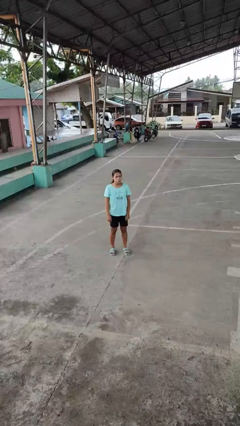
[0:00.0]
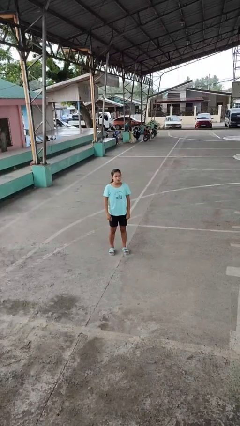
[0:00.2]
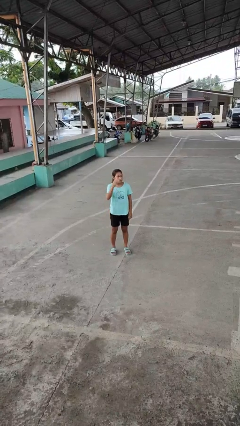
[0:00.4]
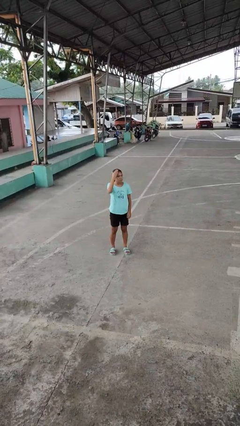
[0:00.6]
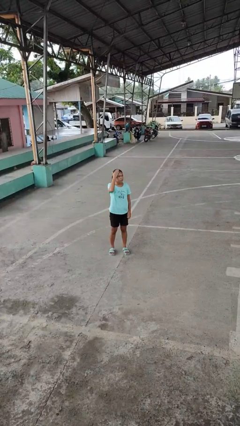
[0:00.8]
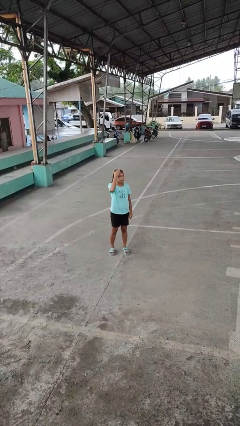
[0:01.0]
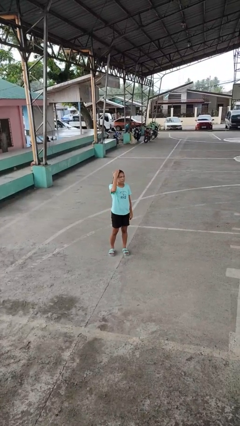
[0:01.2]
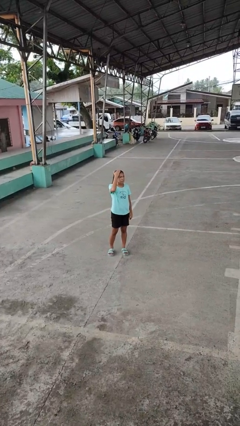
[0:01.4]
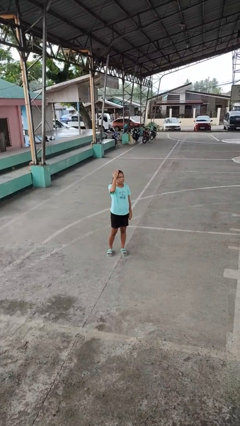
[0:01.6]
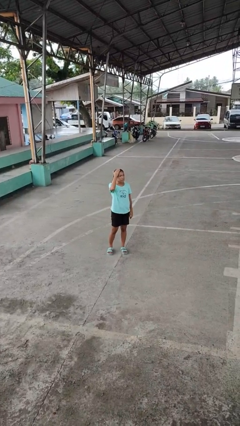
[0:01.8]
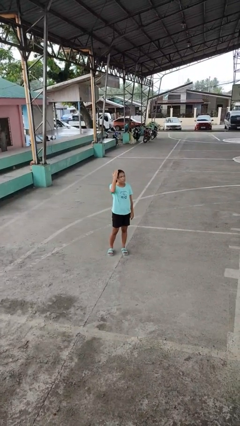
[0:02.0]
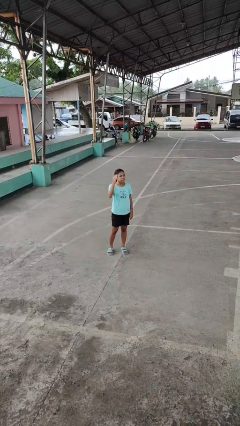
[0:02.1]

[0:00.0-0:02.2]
person pats head

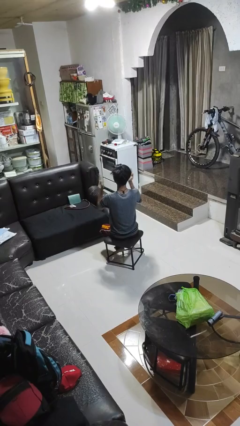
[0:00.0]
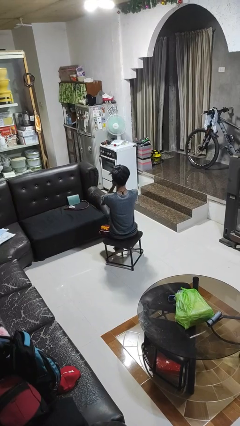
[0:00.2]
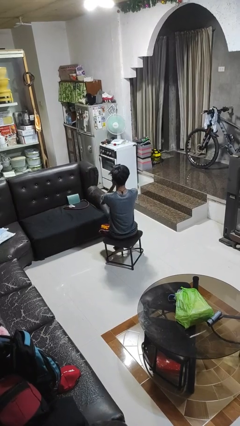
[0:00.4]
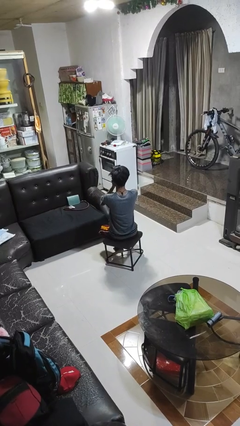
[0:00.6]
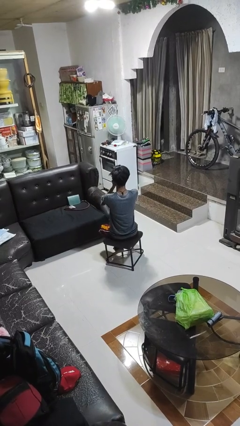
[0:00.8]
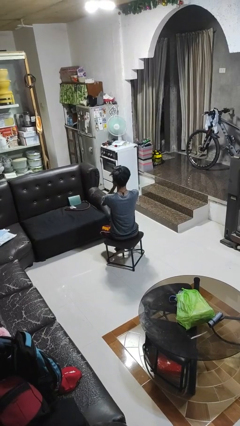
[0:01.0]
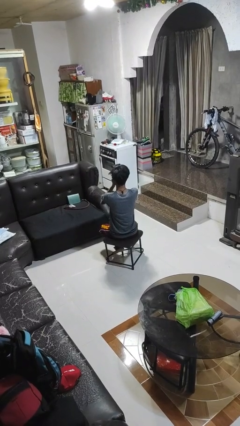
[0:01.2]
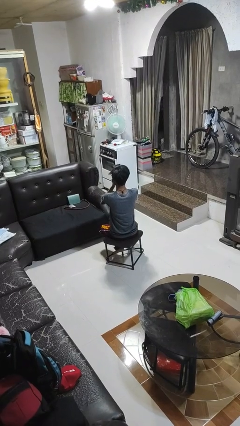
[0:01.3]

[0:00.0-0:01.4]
person covers face with hands

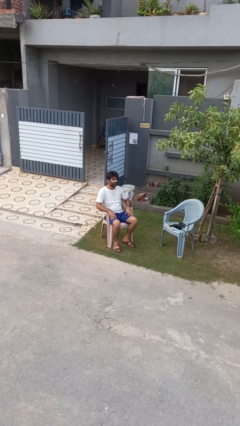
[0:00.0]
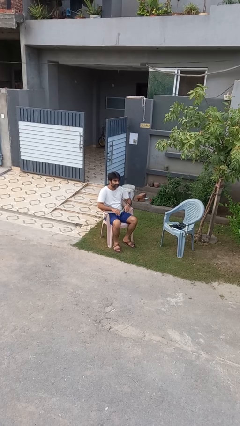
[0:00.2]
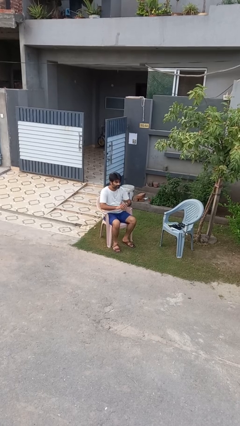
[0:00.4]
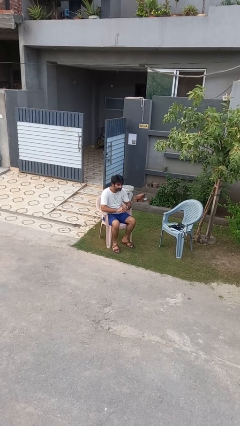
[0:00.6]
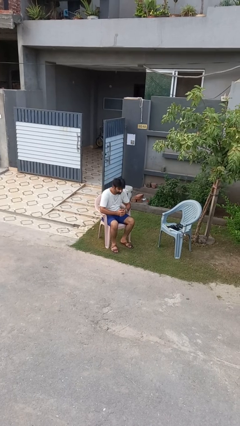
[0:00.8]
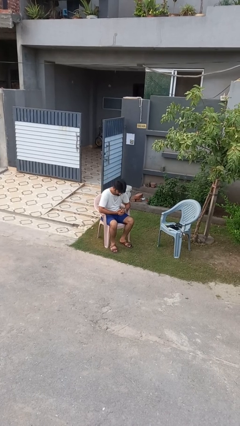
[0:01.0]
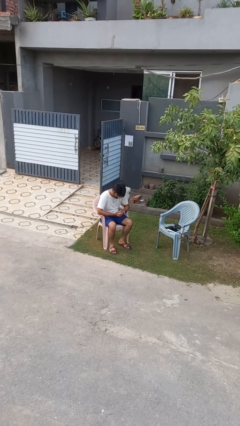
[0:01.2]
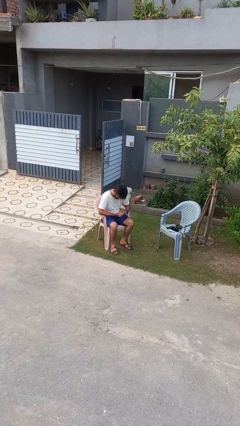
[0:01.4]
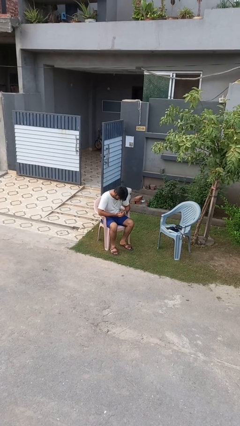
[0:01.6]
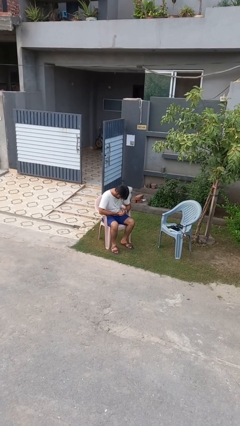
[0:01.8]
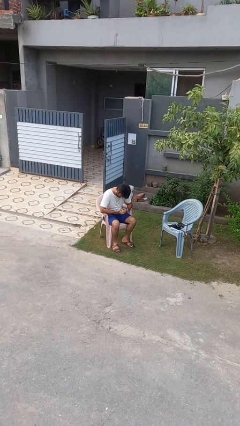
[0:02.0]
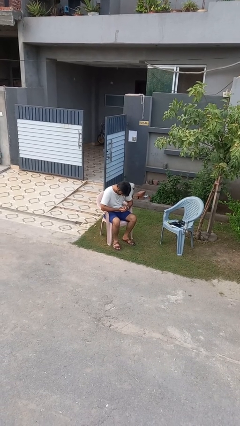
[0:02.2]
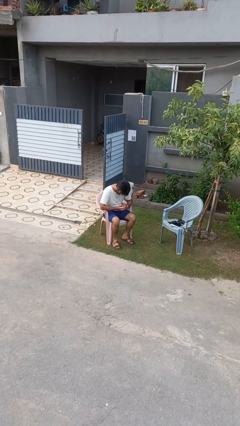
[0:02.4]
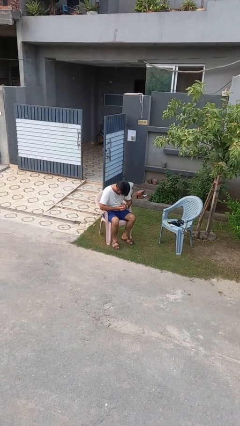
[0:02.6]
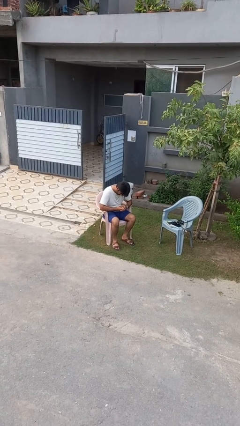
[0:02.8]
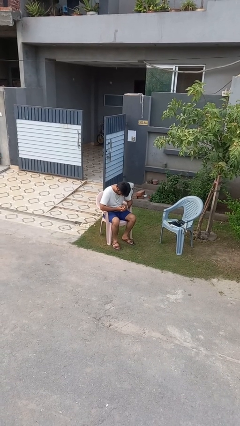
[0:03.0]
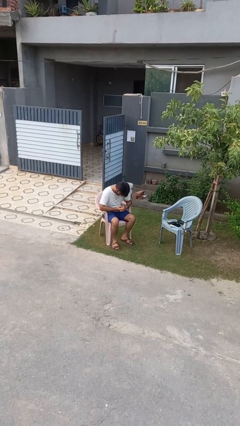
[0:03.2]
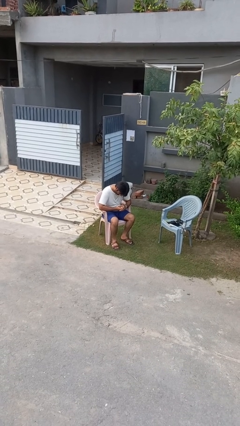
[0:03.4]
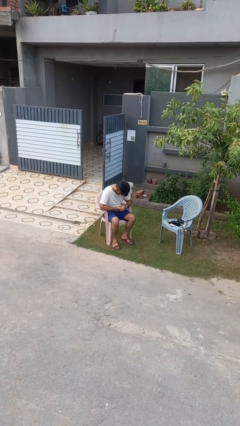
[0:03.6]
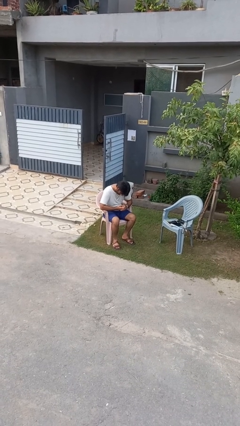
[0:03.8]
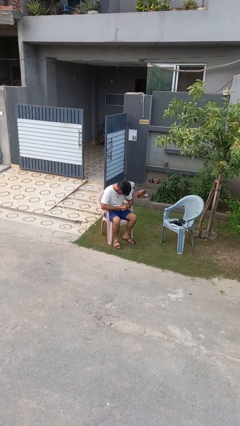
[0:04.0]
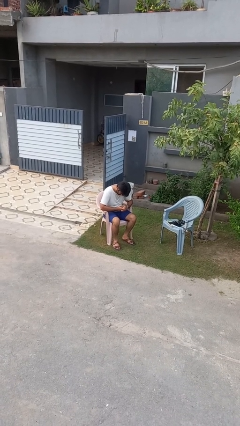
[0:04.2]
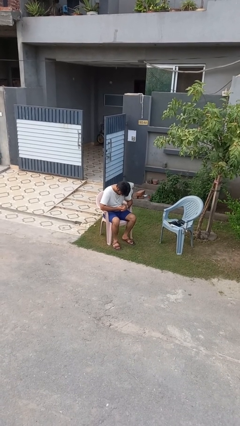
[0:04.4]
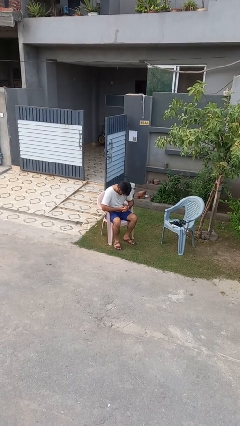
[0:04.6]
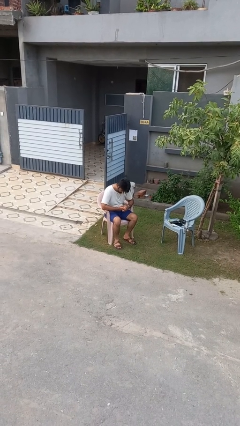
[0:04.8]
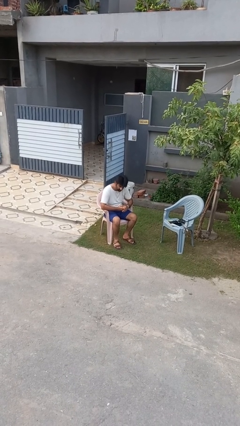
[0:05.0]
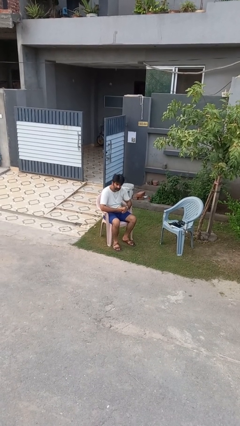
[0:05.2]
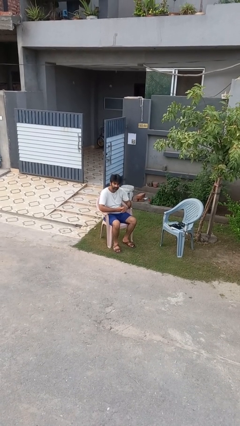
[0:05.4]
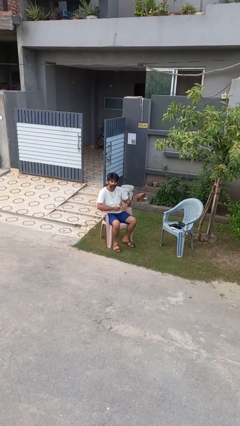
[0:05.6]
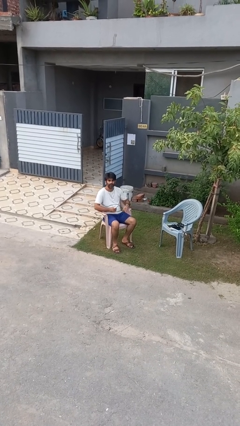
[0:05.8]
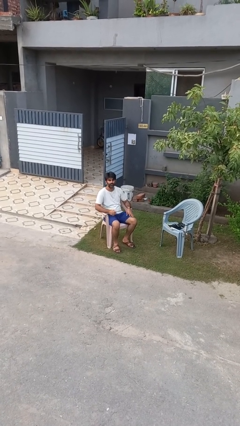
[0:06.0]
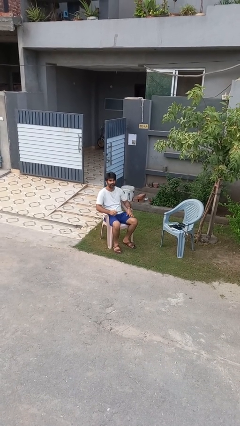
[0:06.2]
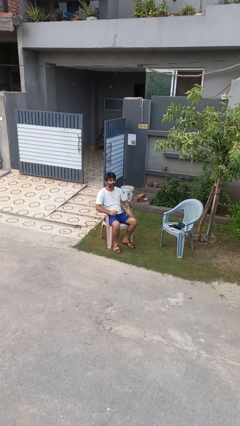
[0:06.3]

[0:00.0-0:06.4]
person looks at hands in lap

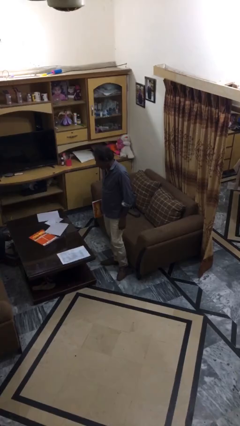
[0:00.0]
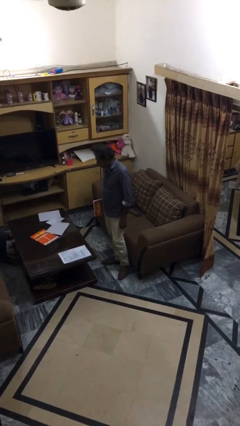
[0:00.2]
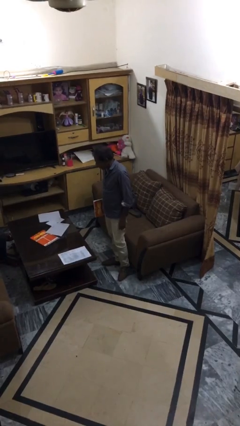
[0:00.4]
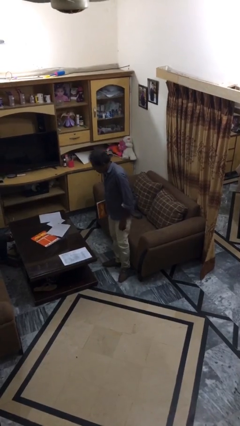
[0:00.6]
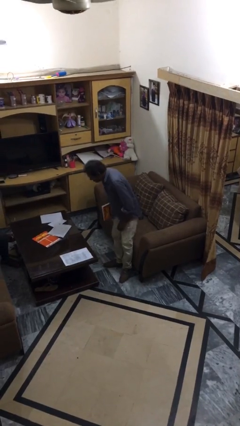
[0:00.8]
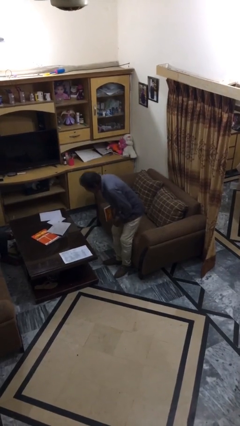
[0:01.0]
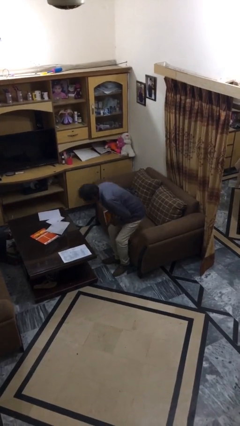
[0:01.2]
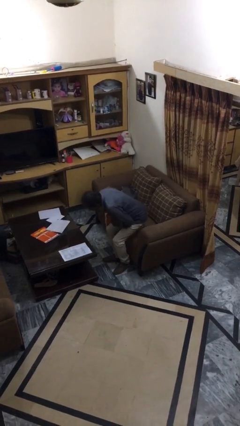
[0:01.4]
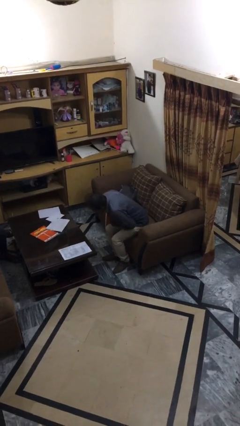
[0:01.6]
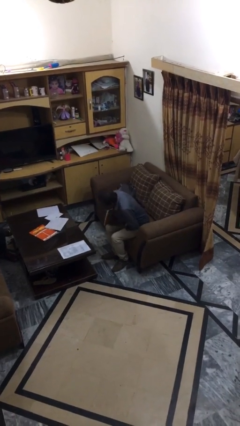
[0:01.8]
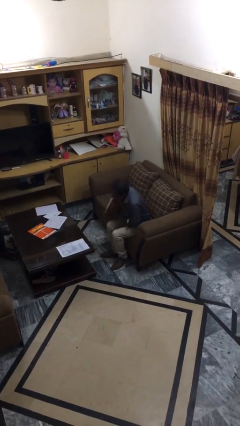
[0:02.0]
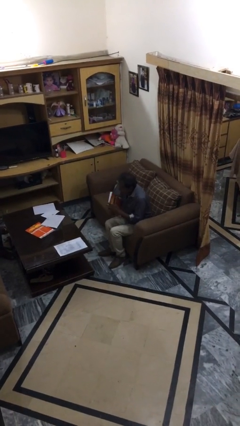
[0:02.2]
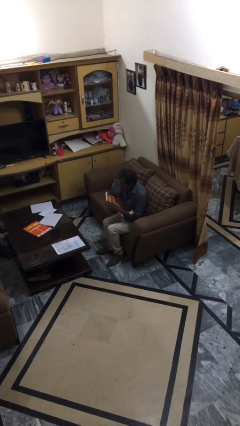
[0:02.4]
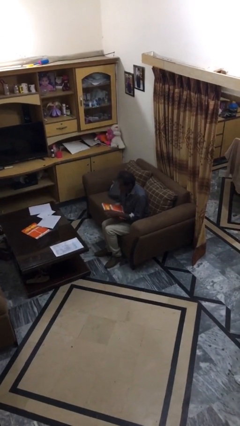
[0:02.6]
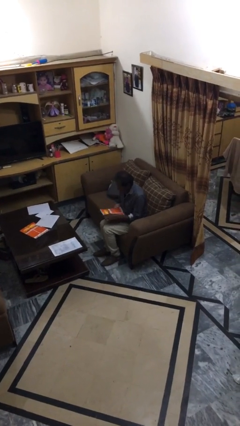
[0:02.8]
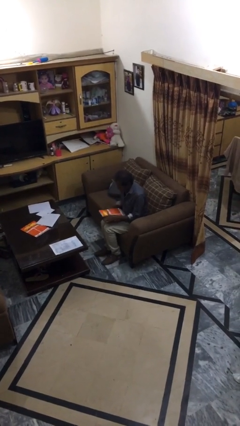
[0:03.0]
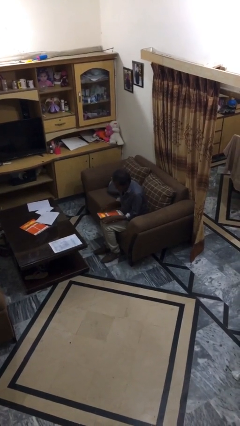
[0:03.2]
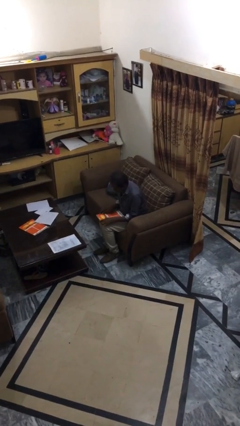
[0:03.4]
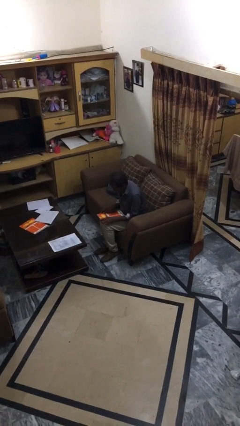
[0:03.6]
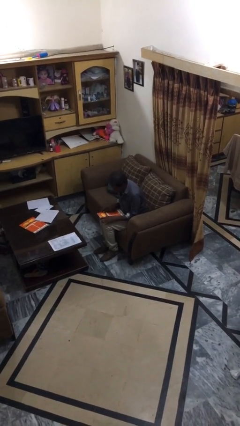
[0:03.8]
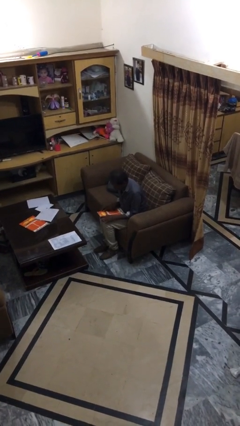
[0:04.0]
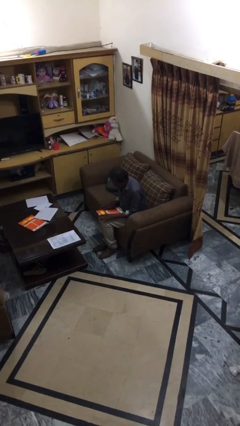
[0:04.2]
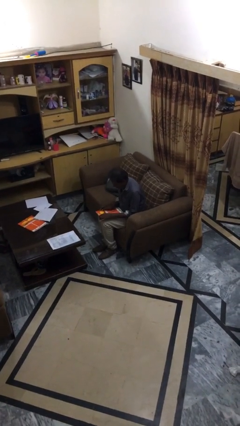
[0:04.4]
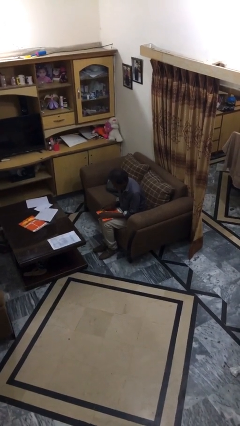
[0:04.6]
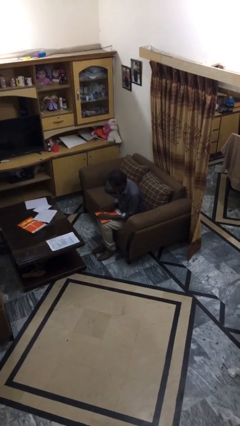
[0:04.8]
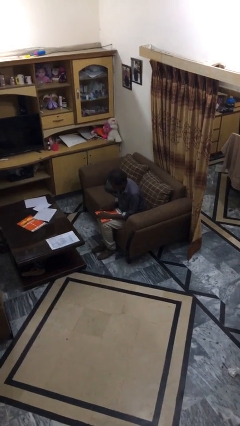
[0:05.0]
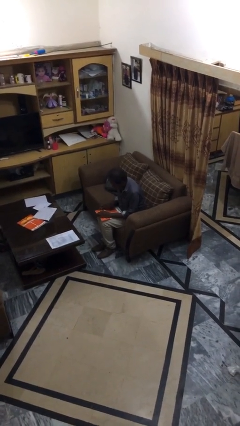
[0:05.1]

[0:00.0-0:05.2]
person sits down

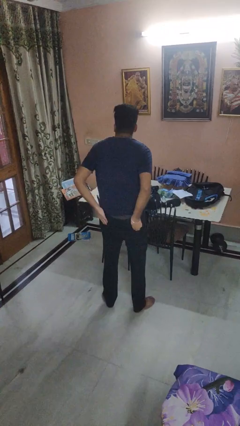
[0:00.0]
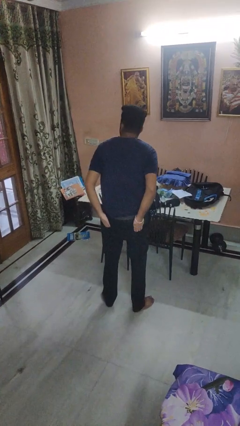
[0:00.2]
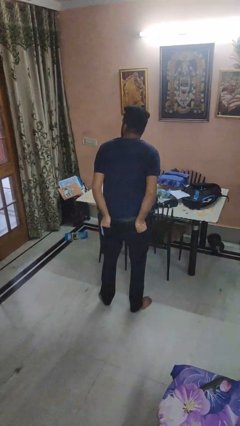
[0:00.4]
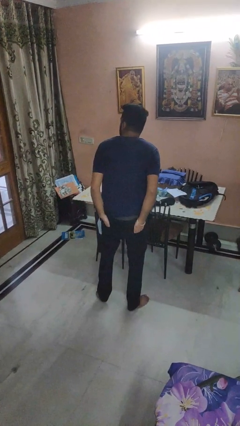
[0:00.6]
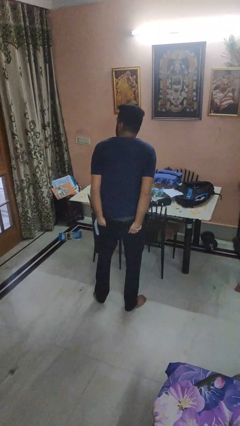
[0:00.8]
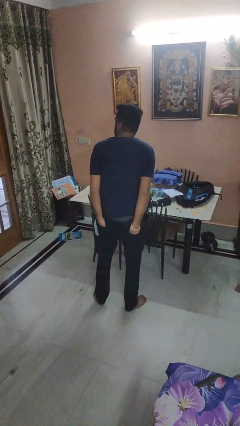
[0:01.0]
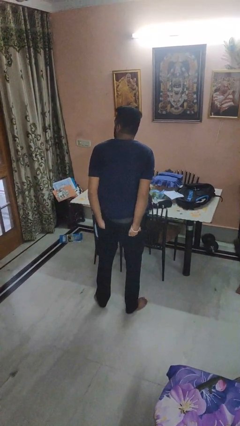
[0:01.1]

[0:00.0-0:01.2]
person puts hands in back pockets

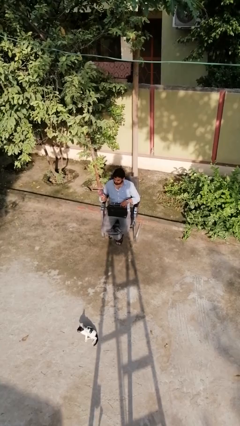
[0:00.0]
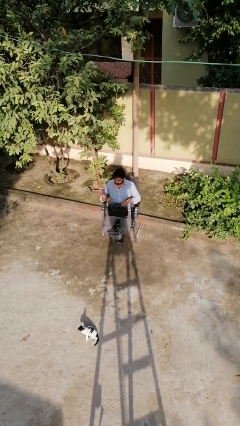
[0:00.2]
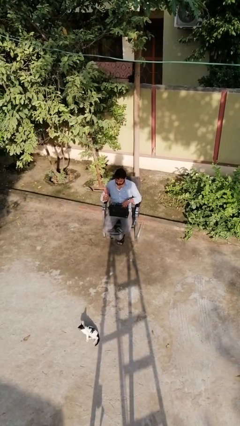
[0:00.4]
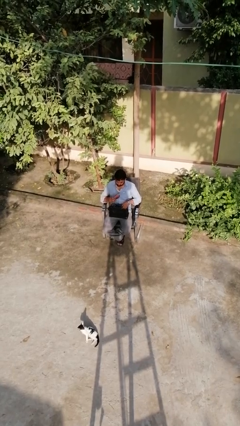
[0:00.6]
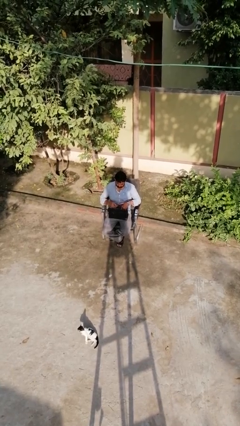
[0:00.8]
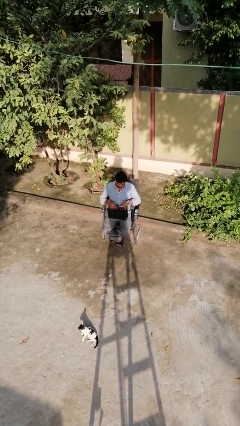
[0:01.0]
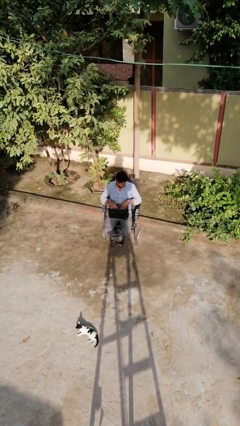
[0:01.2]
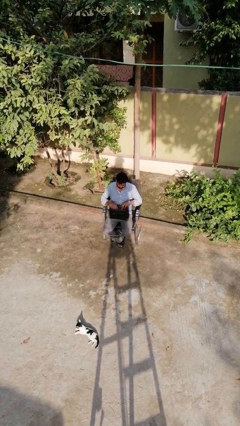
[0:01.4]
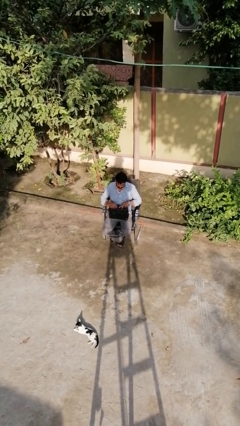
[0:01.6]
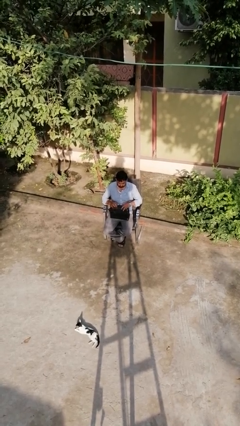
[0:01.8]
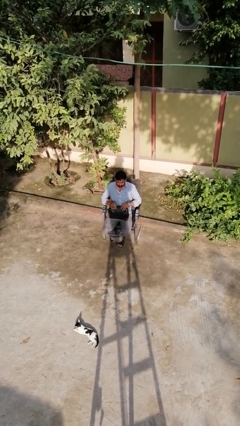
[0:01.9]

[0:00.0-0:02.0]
person puts object into backpack
